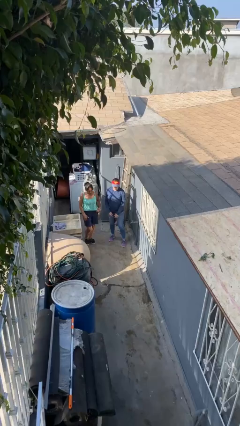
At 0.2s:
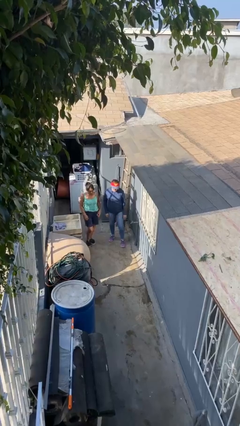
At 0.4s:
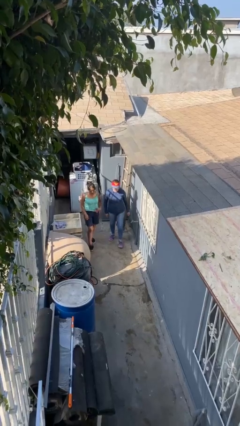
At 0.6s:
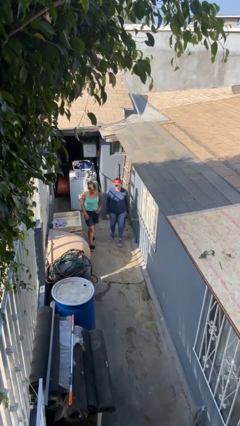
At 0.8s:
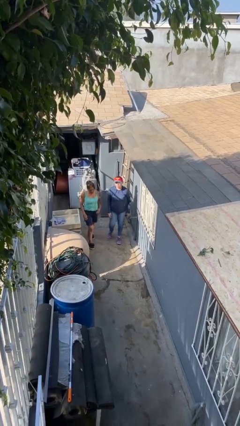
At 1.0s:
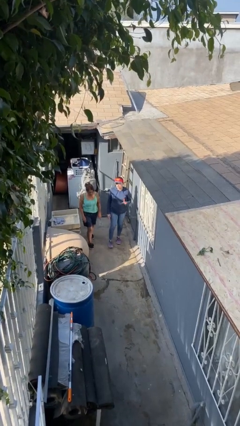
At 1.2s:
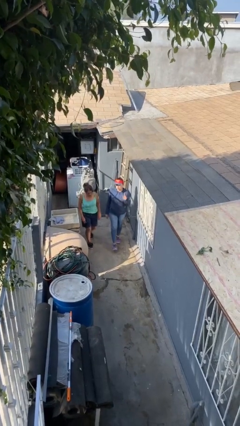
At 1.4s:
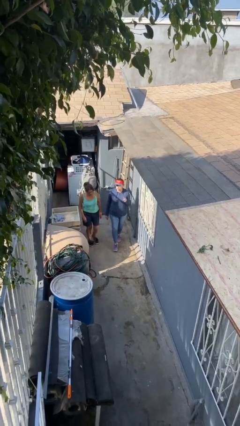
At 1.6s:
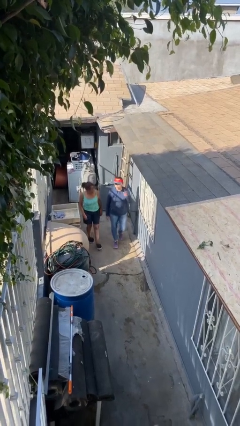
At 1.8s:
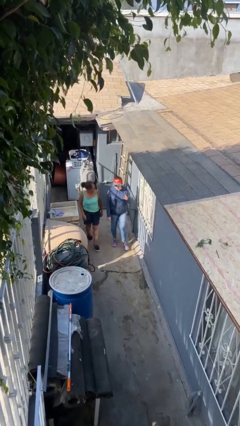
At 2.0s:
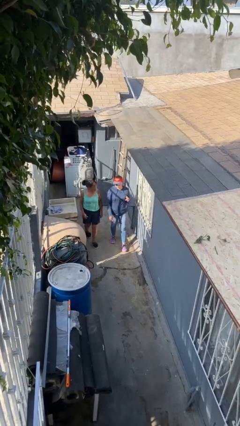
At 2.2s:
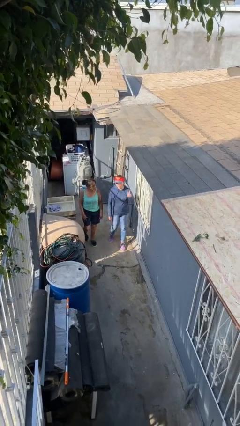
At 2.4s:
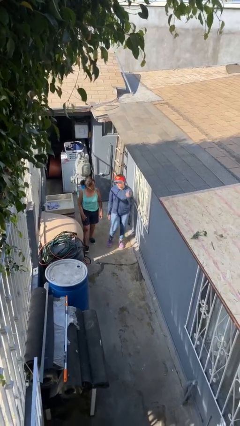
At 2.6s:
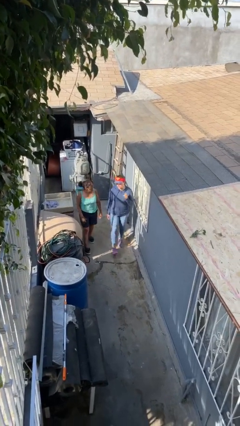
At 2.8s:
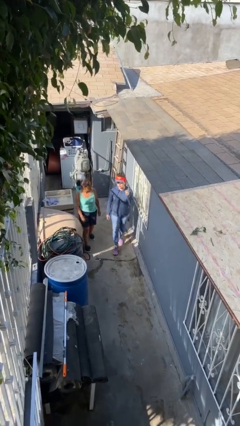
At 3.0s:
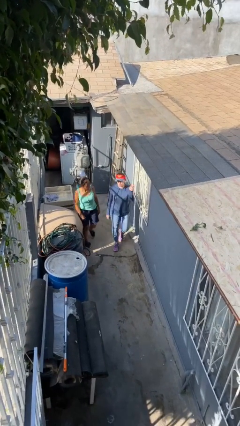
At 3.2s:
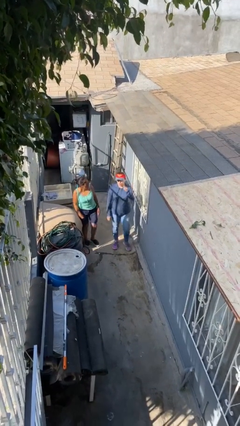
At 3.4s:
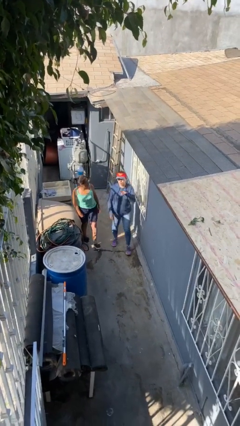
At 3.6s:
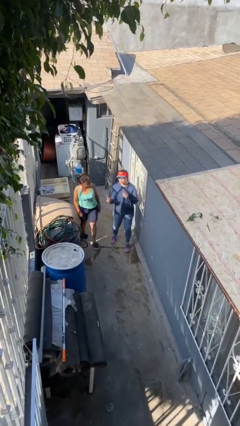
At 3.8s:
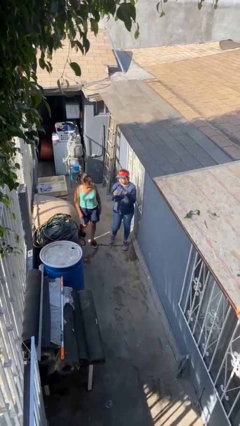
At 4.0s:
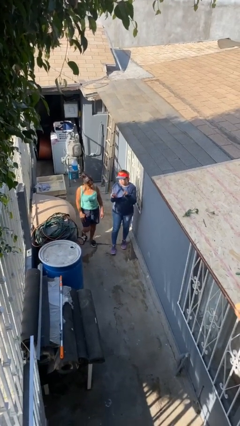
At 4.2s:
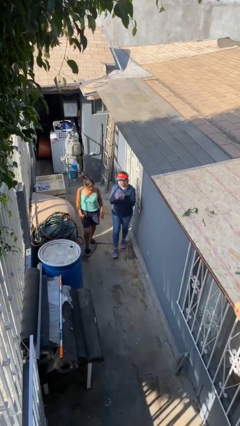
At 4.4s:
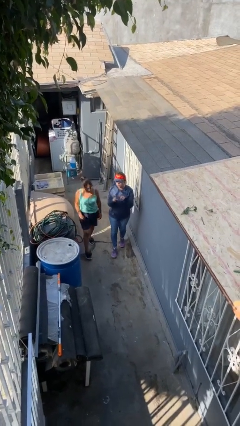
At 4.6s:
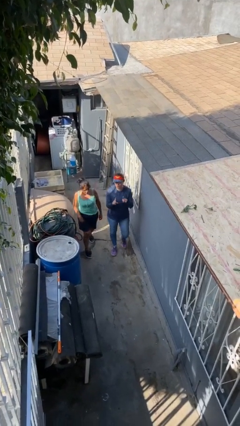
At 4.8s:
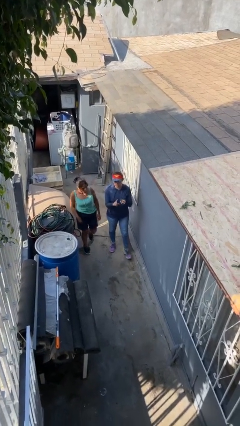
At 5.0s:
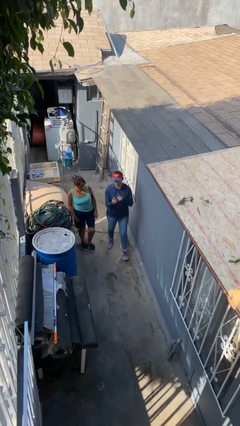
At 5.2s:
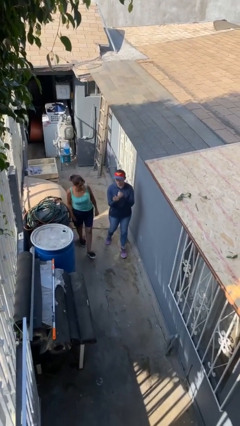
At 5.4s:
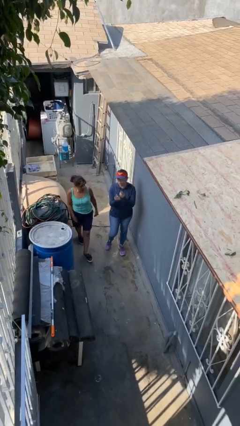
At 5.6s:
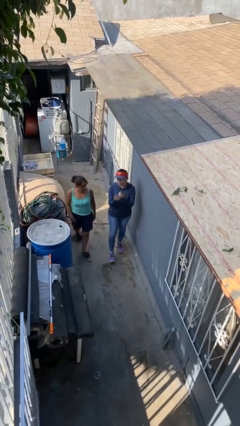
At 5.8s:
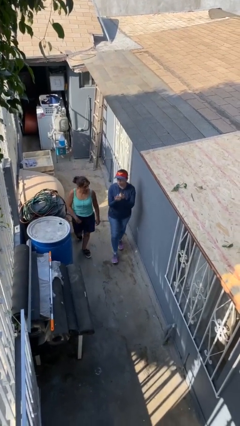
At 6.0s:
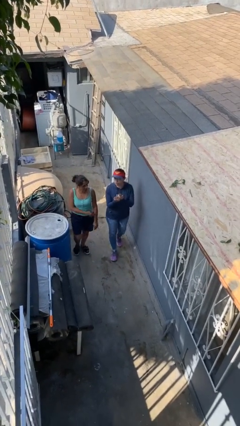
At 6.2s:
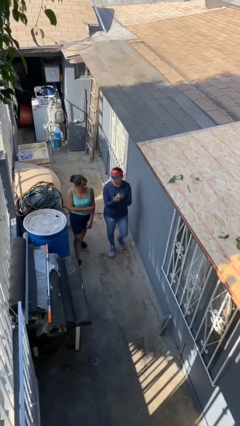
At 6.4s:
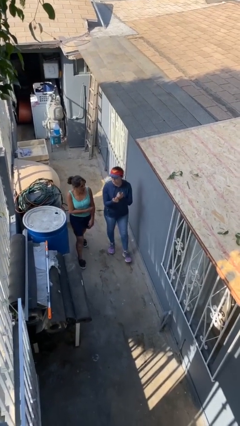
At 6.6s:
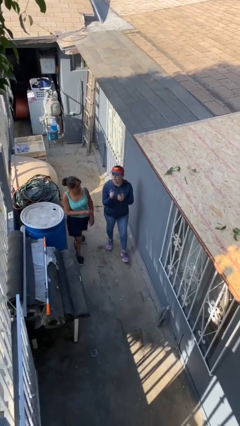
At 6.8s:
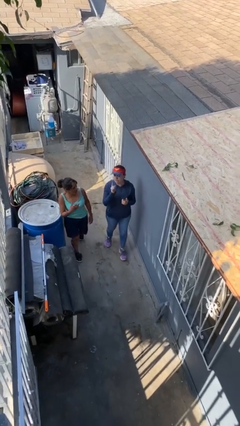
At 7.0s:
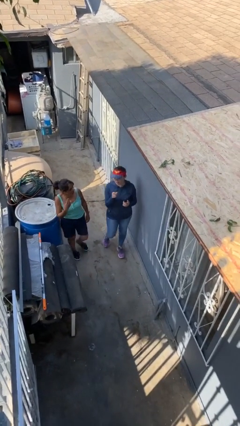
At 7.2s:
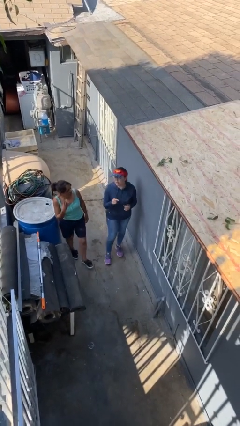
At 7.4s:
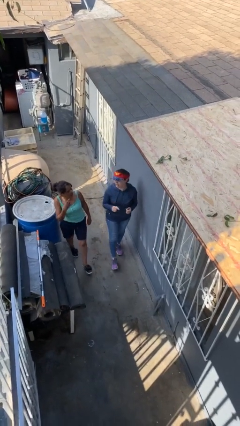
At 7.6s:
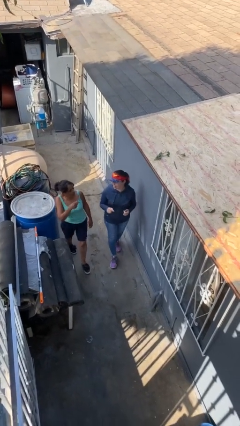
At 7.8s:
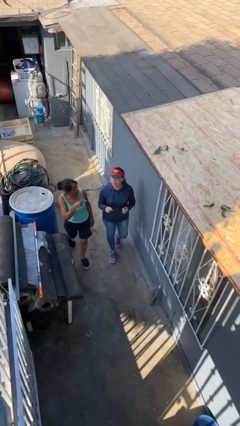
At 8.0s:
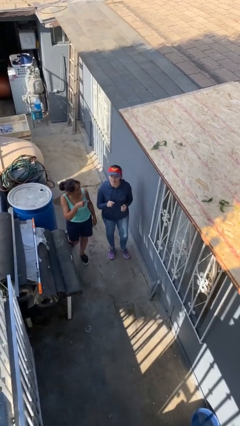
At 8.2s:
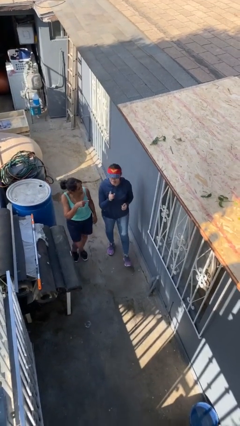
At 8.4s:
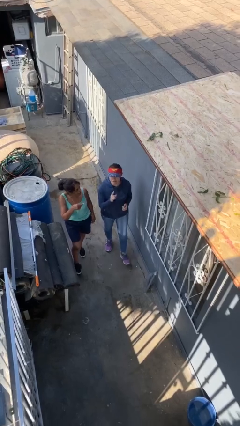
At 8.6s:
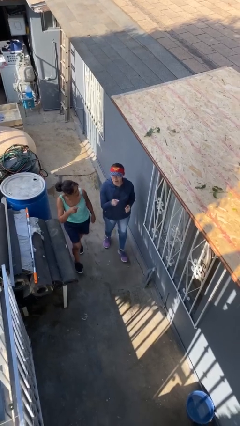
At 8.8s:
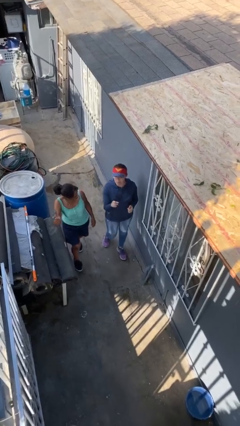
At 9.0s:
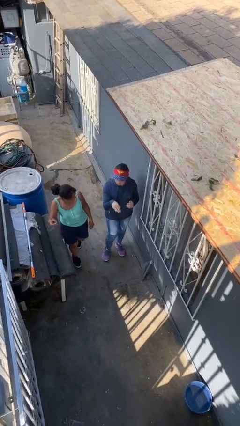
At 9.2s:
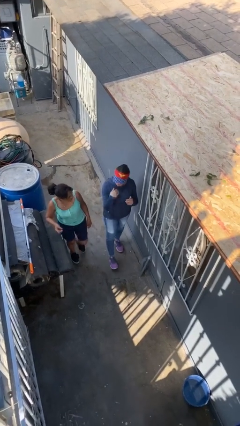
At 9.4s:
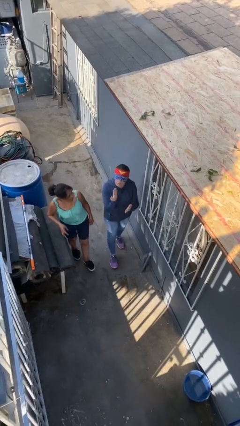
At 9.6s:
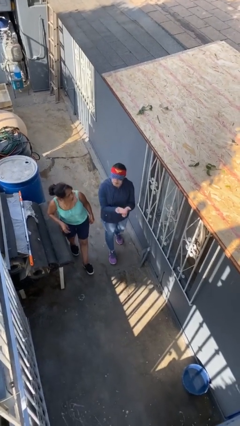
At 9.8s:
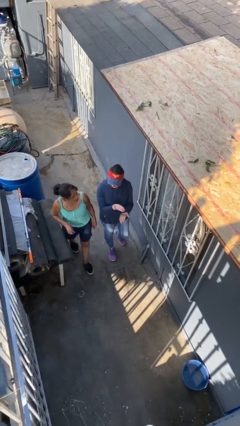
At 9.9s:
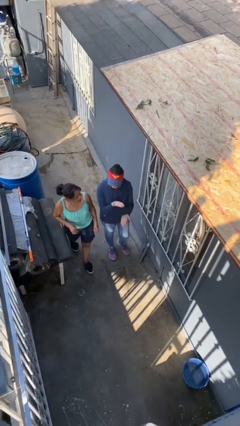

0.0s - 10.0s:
person talks to person

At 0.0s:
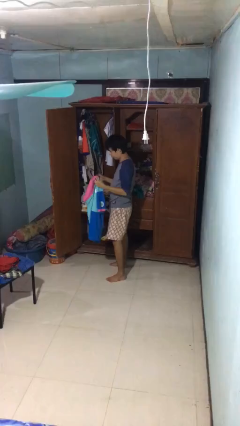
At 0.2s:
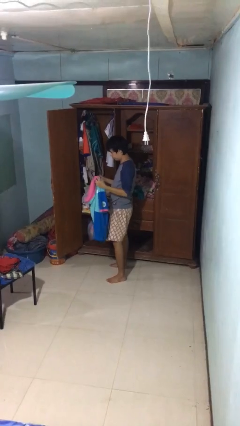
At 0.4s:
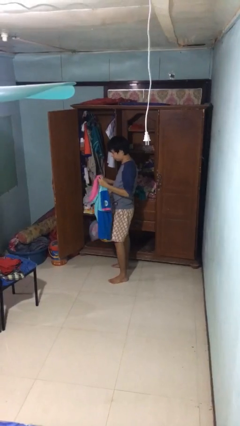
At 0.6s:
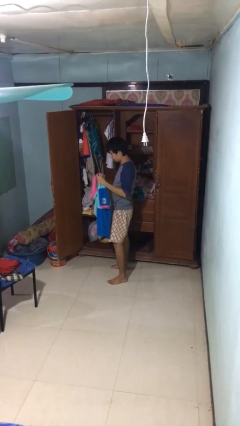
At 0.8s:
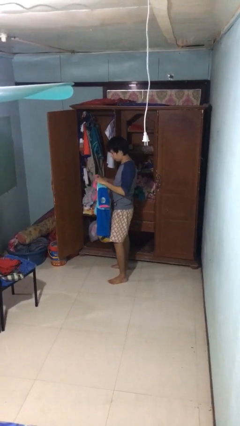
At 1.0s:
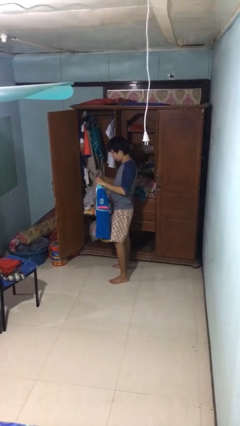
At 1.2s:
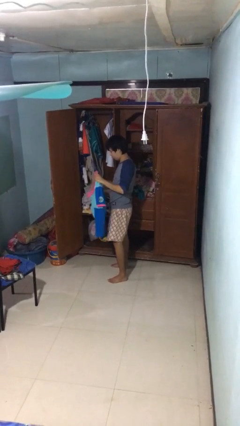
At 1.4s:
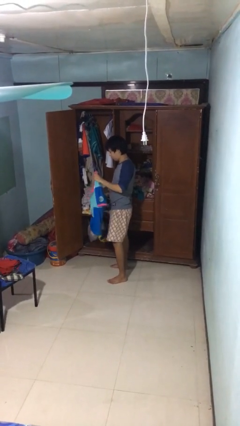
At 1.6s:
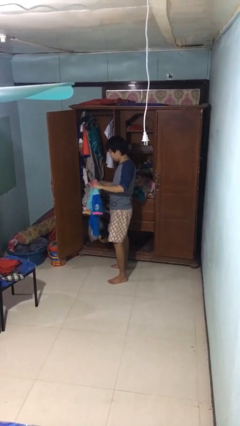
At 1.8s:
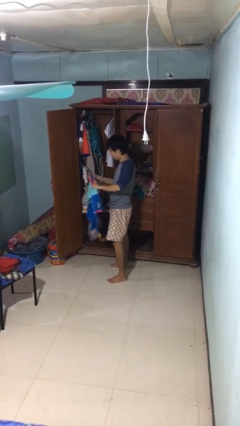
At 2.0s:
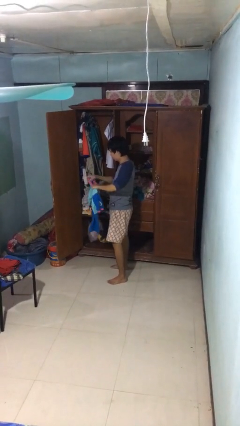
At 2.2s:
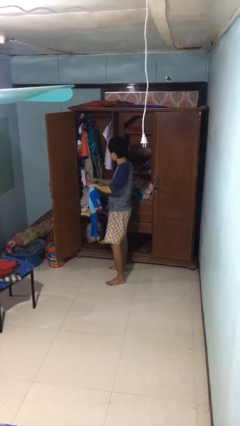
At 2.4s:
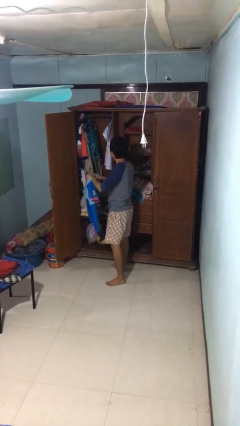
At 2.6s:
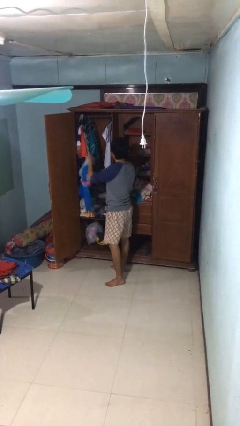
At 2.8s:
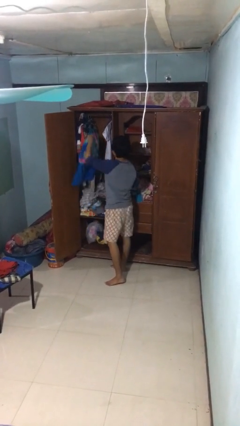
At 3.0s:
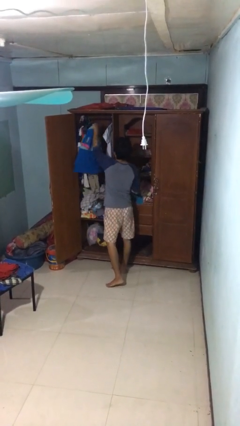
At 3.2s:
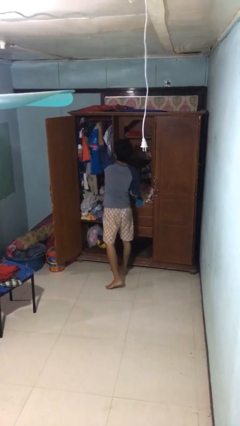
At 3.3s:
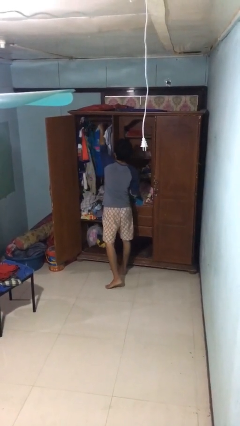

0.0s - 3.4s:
person puts clothes into closet

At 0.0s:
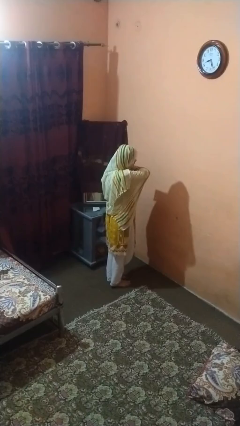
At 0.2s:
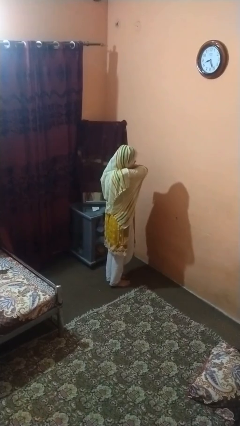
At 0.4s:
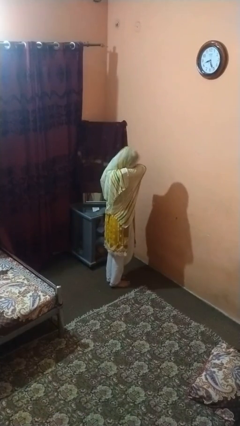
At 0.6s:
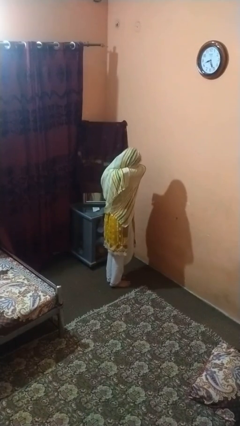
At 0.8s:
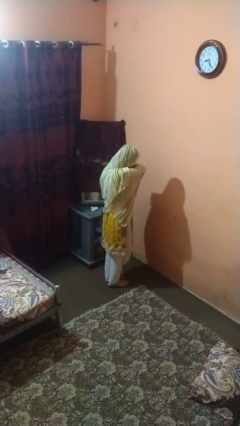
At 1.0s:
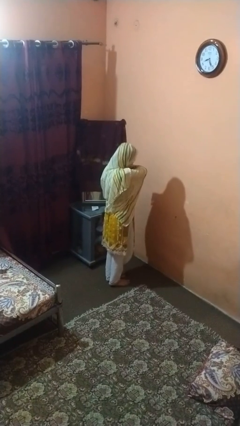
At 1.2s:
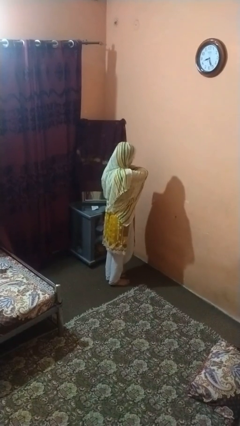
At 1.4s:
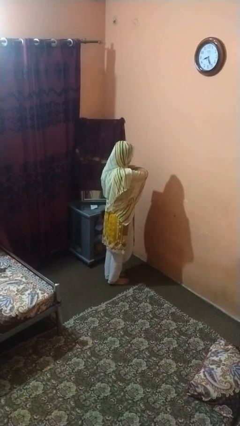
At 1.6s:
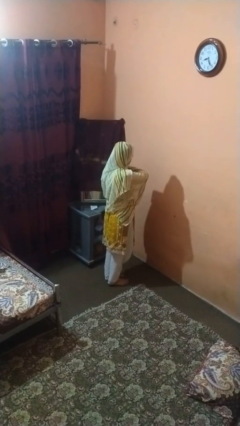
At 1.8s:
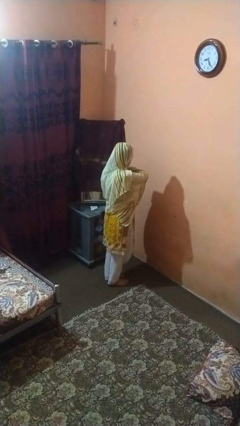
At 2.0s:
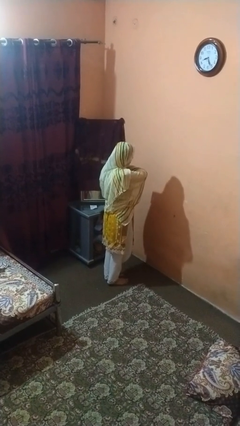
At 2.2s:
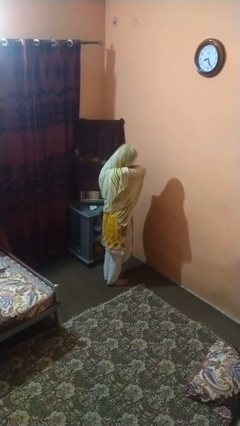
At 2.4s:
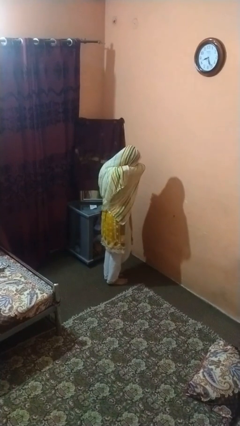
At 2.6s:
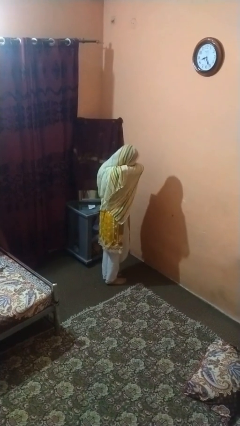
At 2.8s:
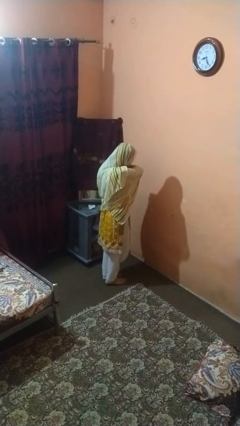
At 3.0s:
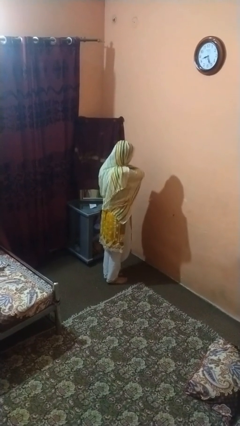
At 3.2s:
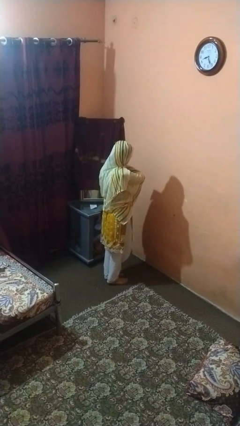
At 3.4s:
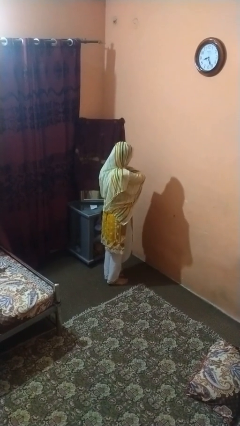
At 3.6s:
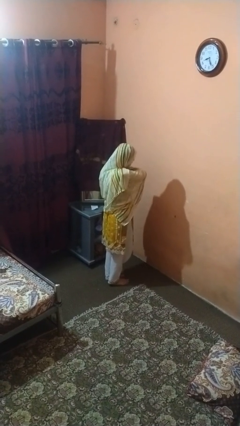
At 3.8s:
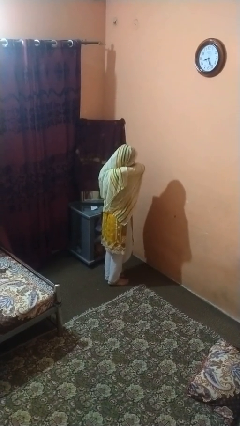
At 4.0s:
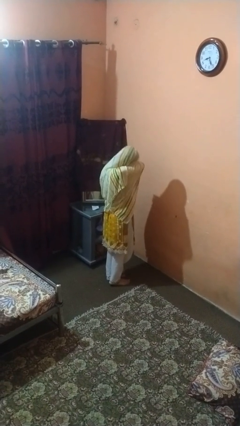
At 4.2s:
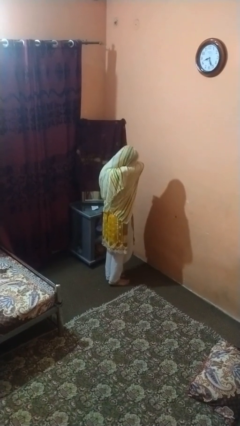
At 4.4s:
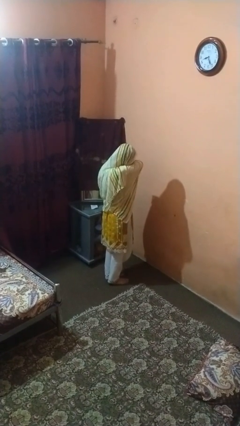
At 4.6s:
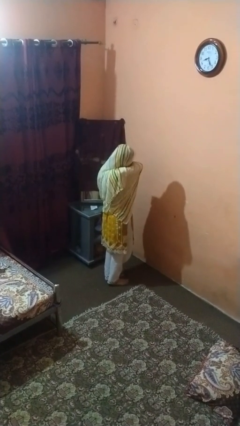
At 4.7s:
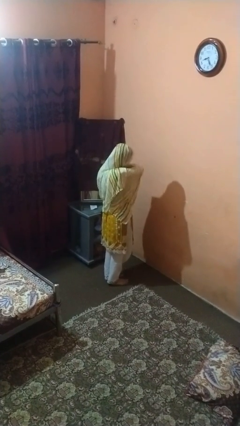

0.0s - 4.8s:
person sneezes into arm
